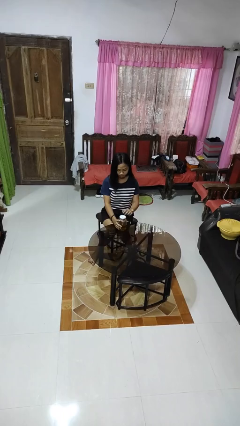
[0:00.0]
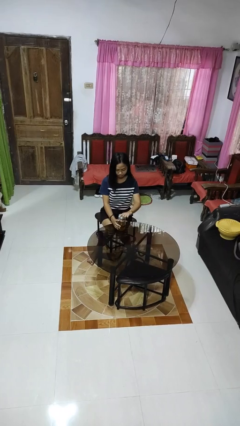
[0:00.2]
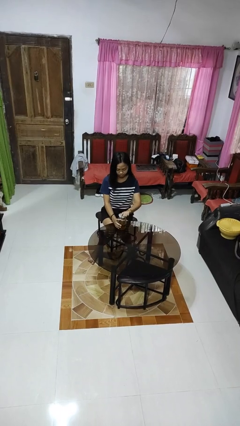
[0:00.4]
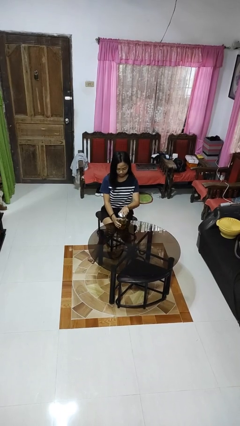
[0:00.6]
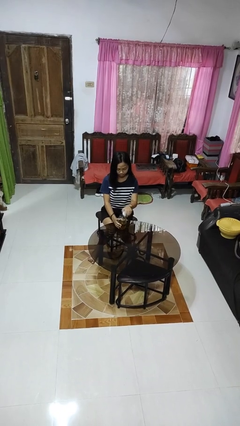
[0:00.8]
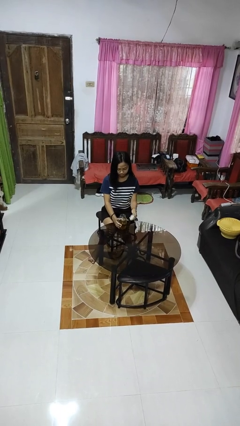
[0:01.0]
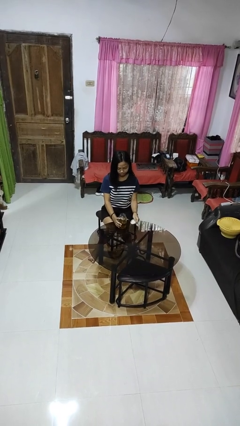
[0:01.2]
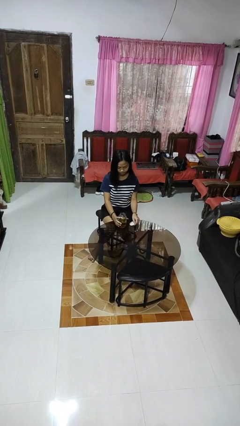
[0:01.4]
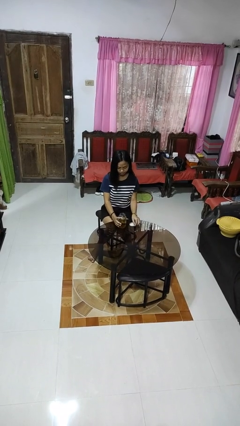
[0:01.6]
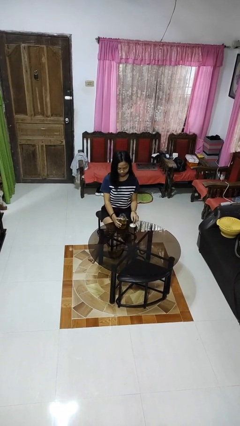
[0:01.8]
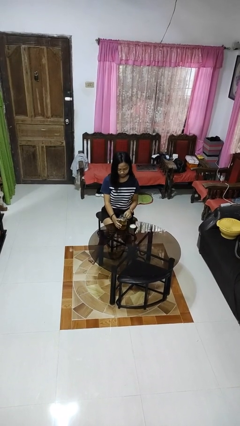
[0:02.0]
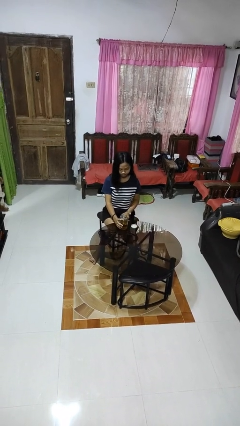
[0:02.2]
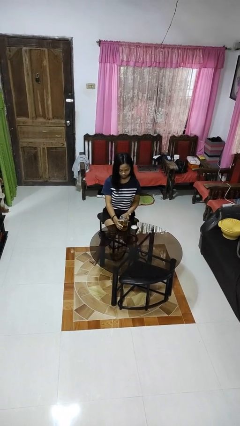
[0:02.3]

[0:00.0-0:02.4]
person opens jar

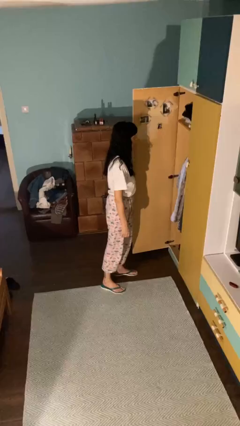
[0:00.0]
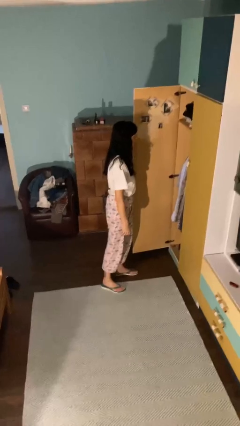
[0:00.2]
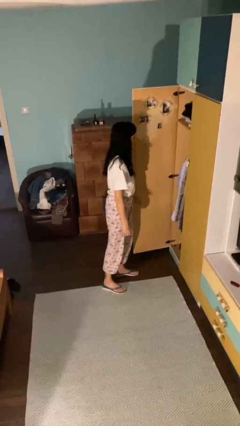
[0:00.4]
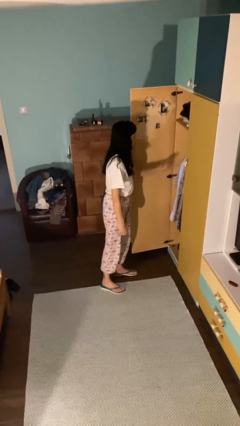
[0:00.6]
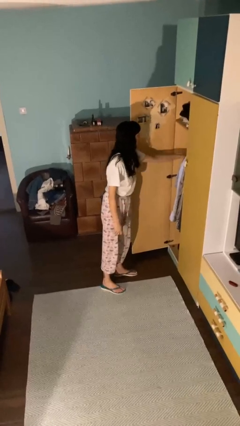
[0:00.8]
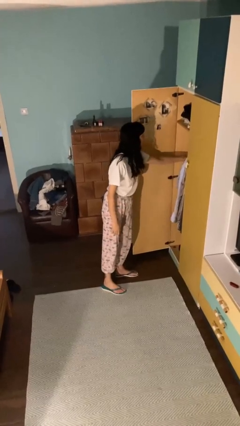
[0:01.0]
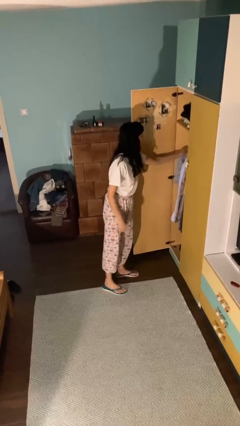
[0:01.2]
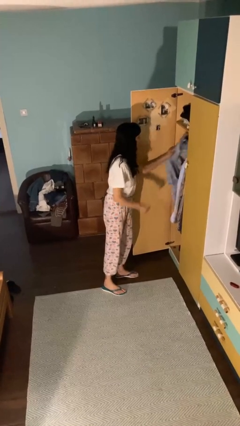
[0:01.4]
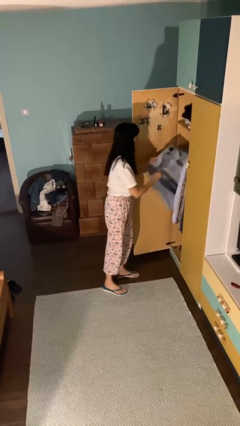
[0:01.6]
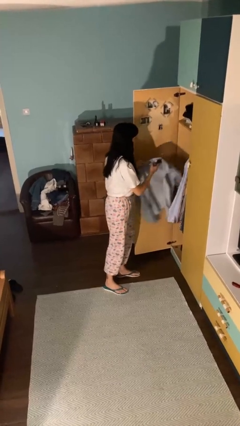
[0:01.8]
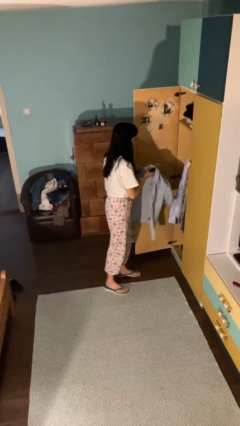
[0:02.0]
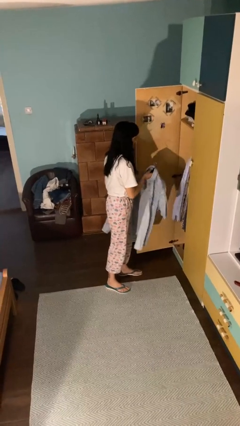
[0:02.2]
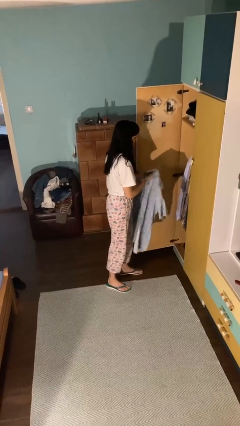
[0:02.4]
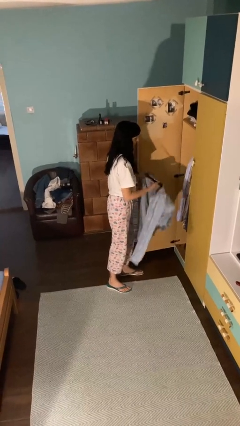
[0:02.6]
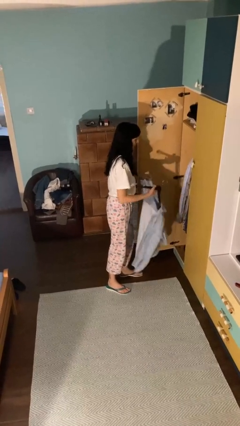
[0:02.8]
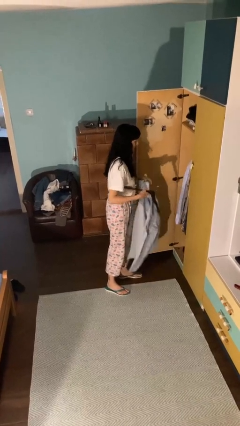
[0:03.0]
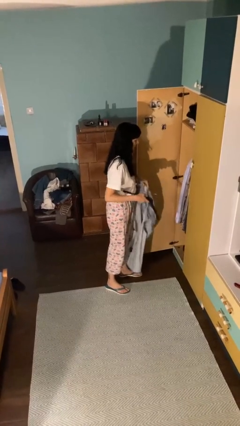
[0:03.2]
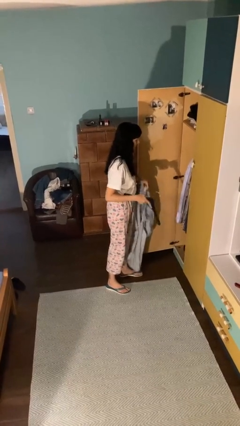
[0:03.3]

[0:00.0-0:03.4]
person takes clothes from closet

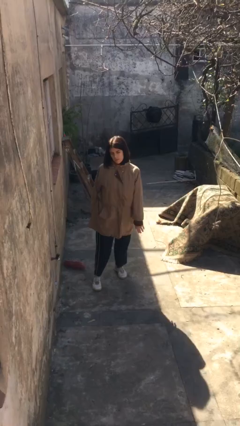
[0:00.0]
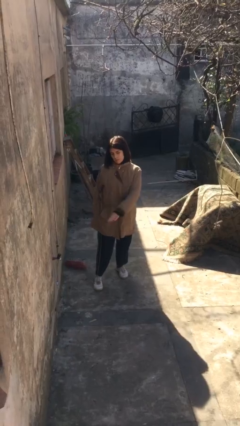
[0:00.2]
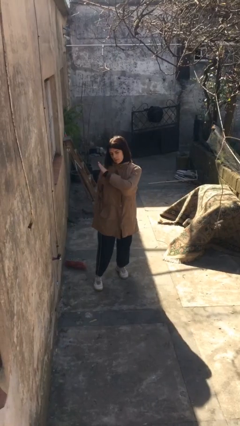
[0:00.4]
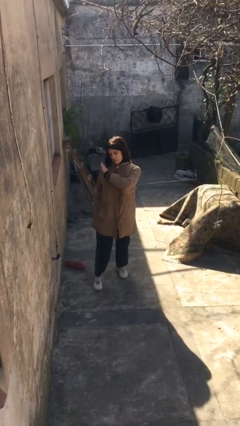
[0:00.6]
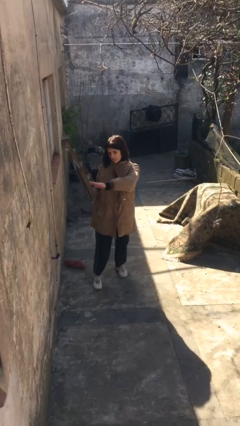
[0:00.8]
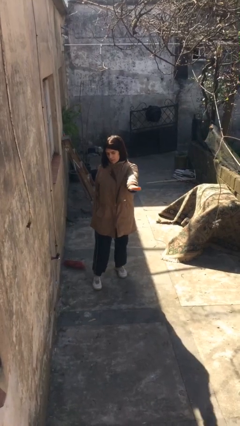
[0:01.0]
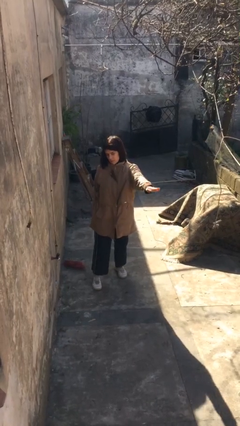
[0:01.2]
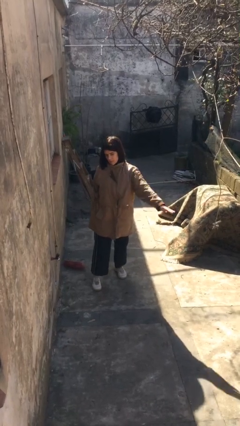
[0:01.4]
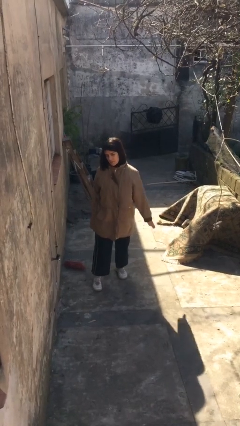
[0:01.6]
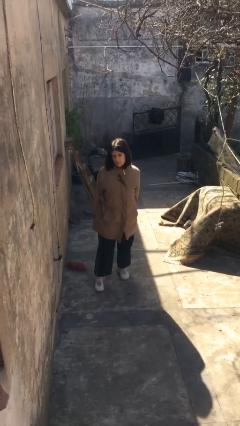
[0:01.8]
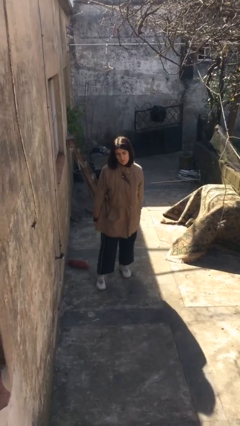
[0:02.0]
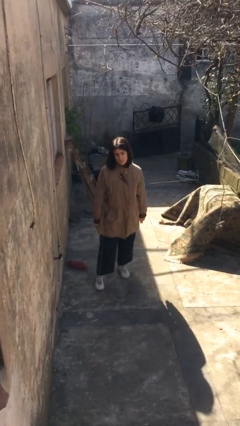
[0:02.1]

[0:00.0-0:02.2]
person karate chop

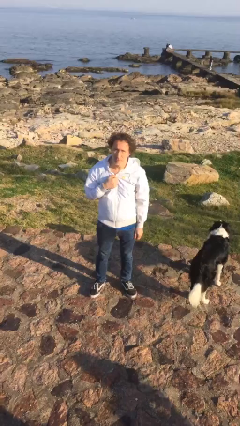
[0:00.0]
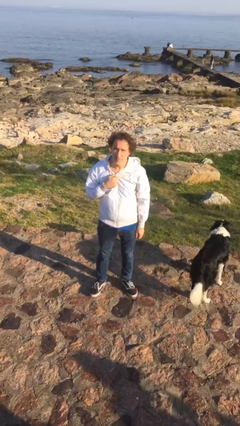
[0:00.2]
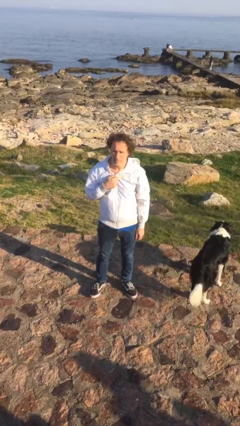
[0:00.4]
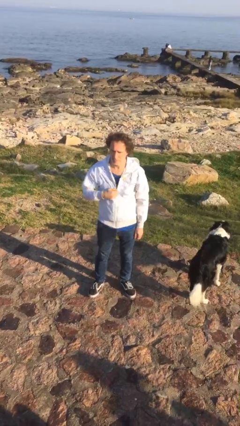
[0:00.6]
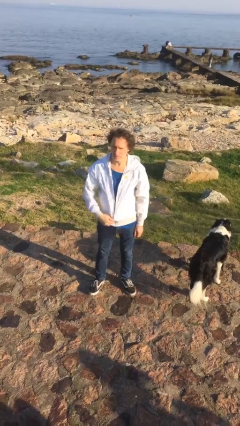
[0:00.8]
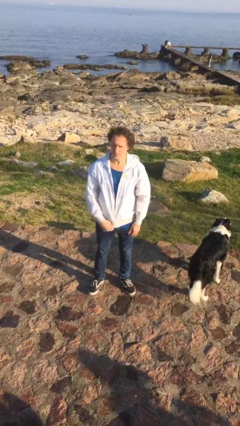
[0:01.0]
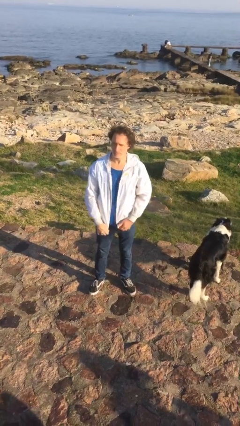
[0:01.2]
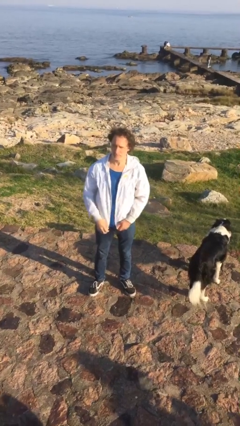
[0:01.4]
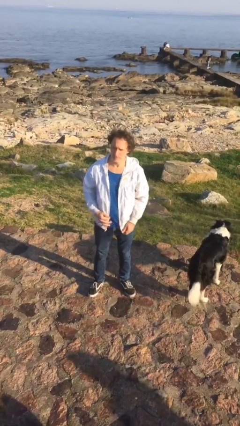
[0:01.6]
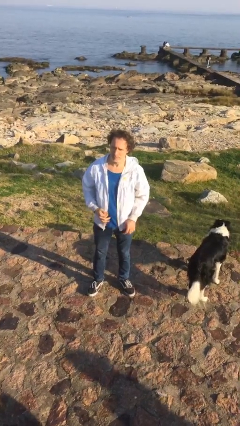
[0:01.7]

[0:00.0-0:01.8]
person unzips jacket

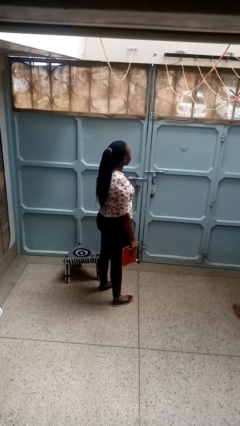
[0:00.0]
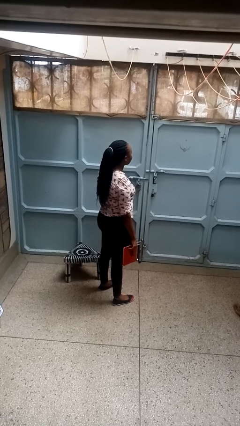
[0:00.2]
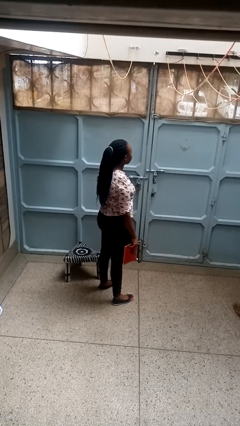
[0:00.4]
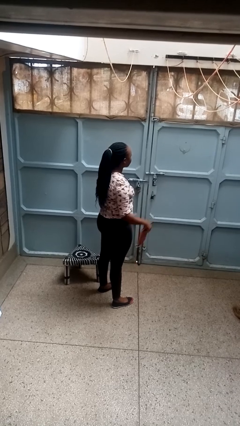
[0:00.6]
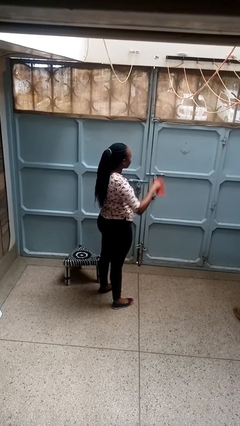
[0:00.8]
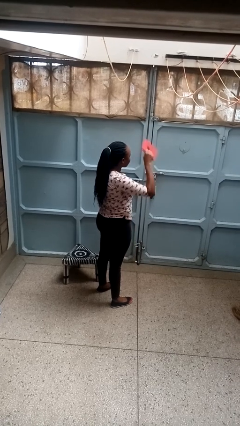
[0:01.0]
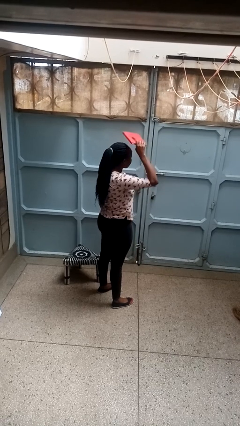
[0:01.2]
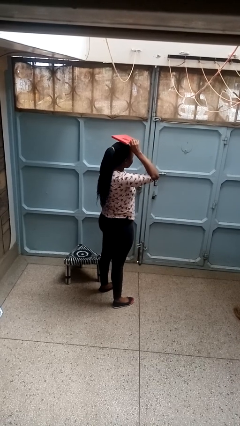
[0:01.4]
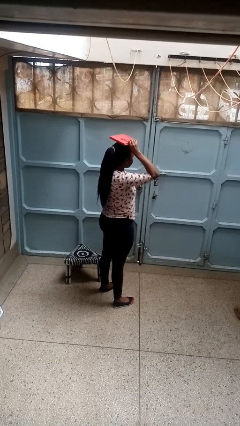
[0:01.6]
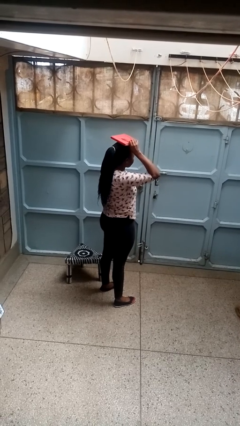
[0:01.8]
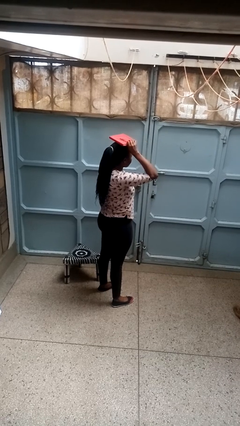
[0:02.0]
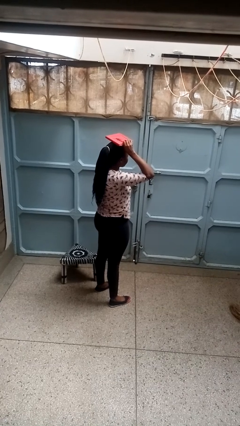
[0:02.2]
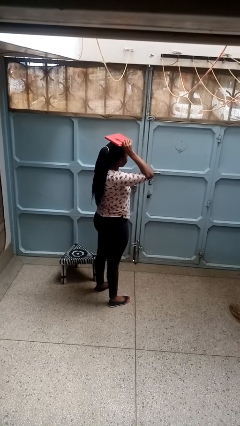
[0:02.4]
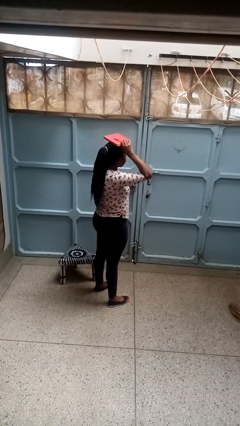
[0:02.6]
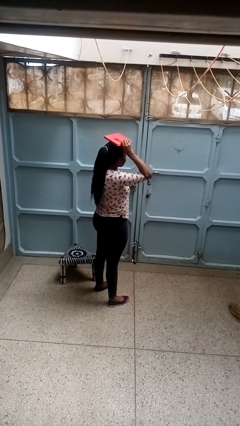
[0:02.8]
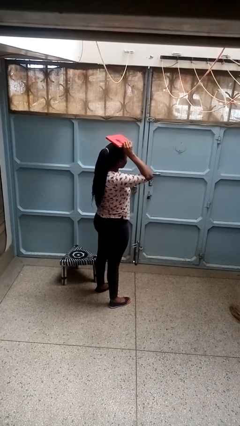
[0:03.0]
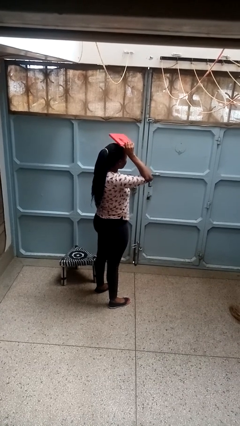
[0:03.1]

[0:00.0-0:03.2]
person holds object above head

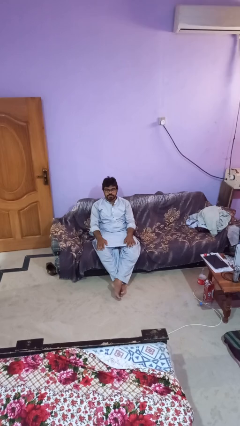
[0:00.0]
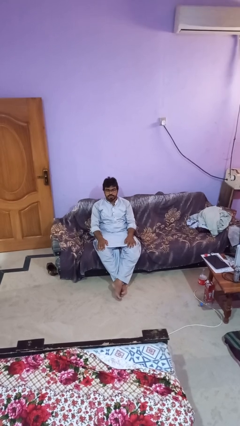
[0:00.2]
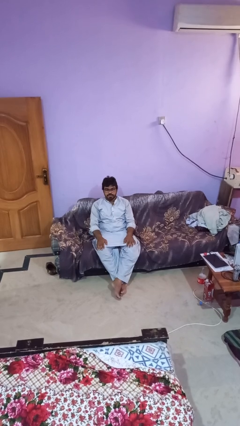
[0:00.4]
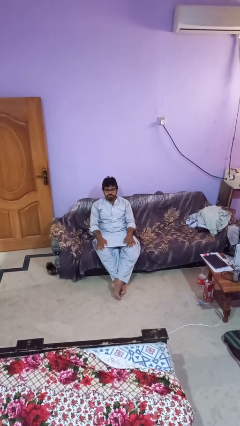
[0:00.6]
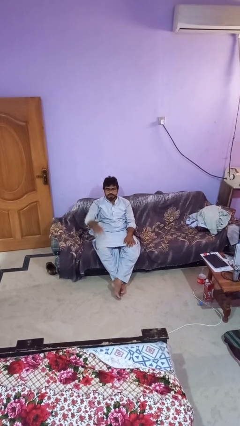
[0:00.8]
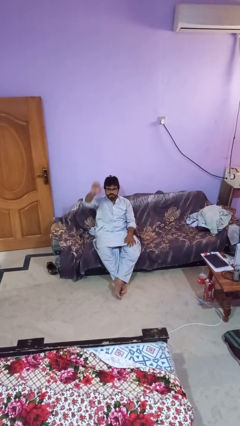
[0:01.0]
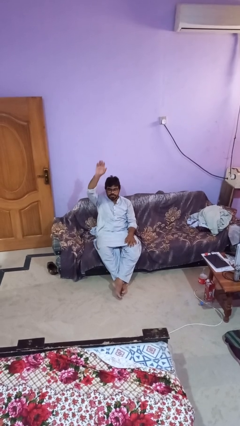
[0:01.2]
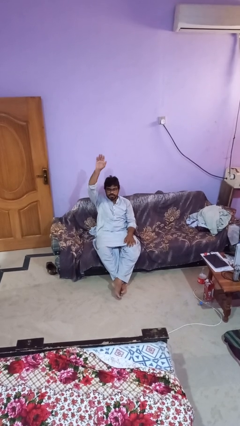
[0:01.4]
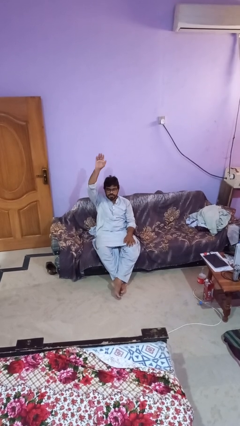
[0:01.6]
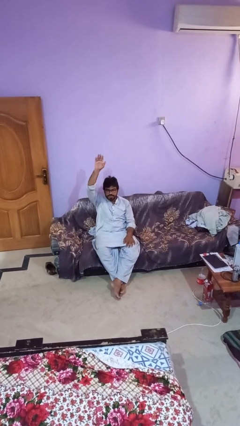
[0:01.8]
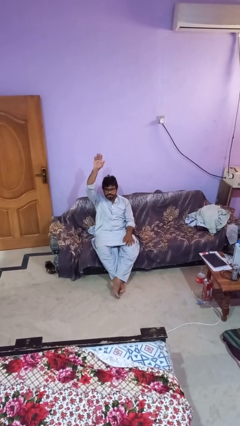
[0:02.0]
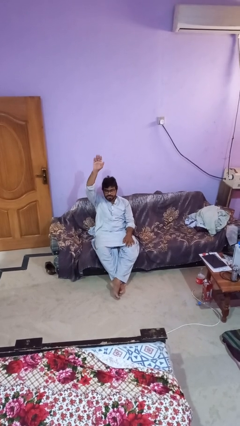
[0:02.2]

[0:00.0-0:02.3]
person gestures raise hand

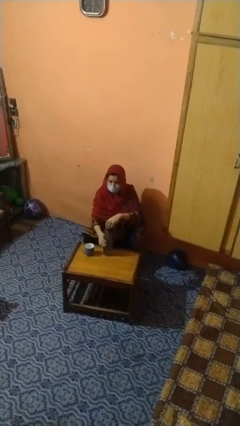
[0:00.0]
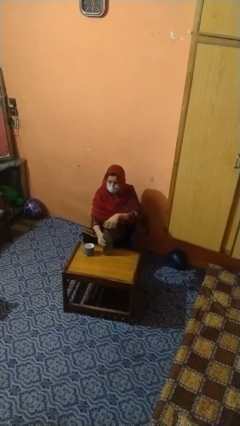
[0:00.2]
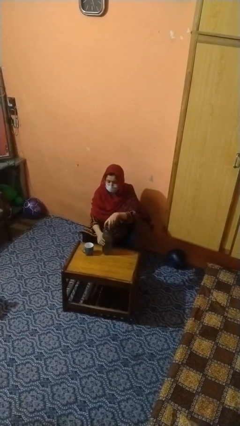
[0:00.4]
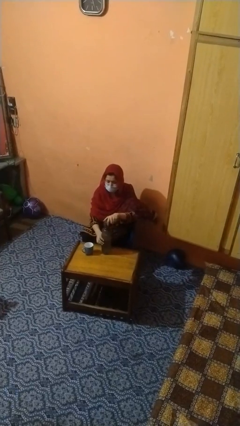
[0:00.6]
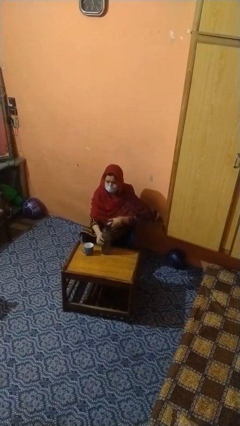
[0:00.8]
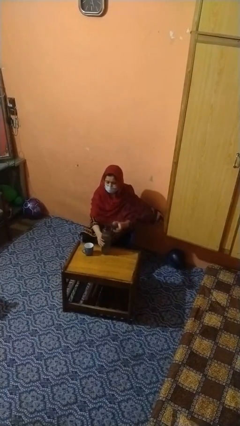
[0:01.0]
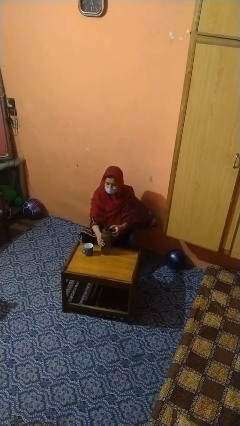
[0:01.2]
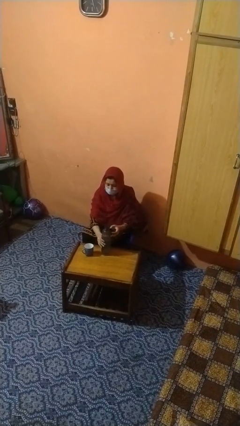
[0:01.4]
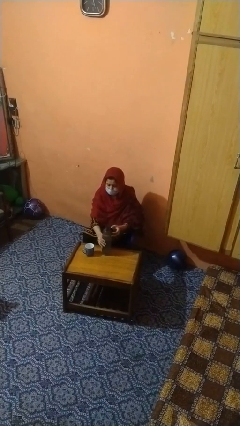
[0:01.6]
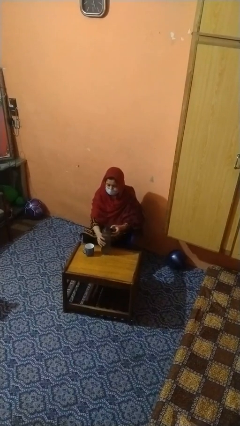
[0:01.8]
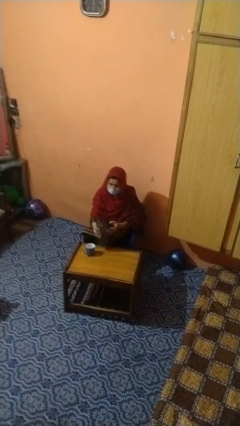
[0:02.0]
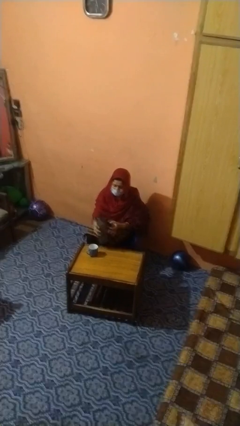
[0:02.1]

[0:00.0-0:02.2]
person unscrews lid from bottle
